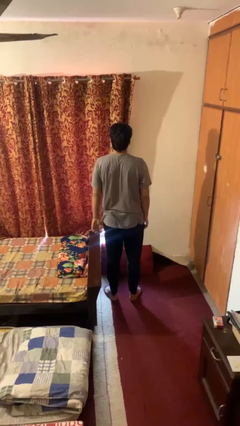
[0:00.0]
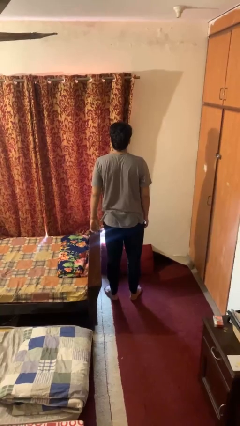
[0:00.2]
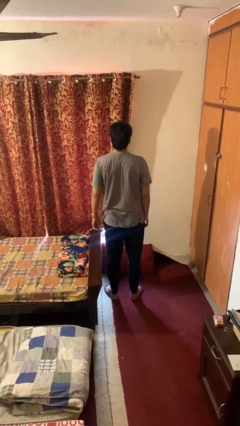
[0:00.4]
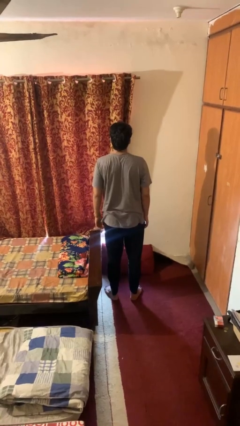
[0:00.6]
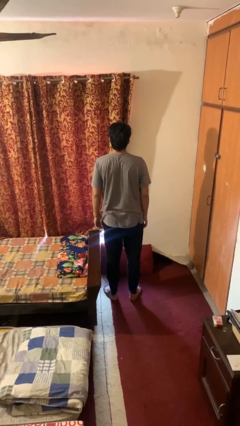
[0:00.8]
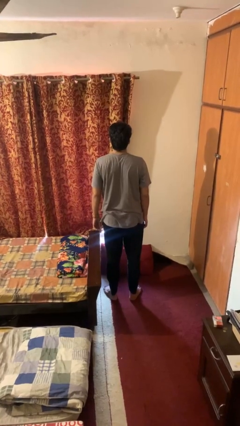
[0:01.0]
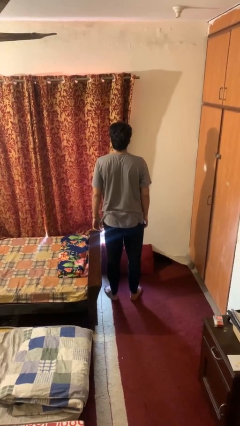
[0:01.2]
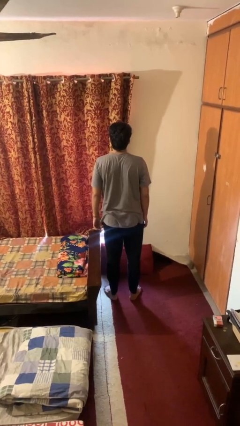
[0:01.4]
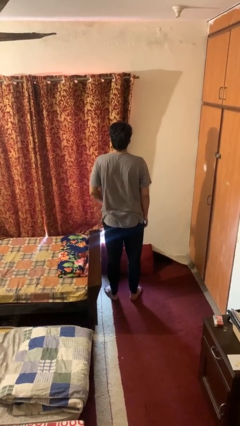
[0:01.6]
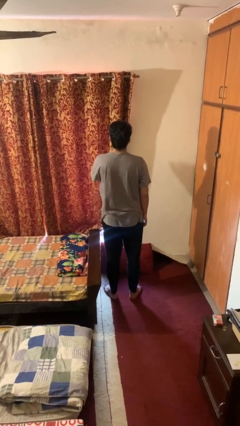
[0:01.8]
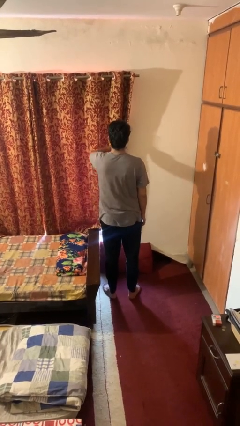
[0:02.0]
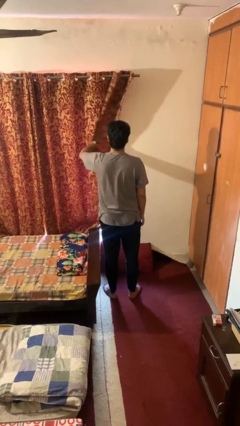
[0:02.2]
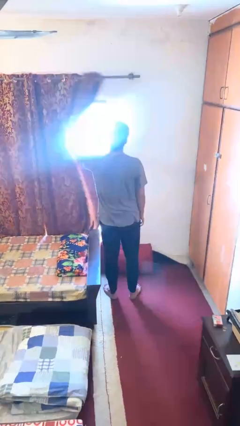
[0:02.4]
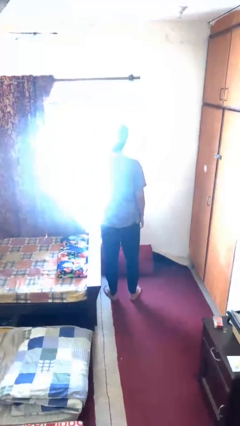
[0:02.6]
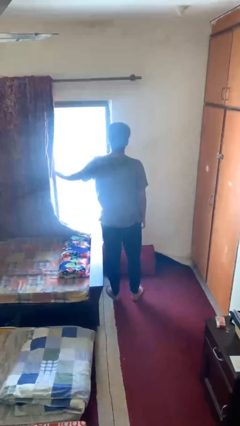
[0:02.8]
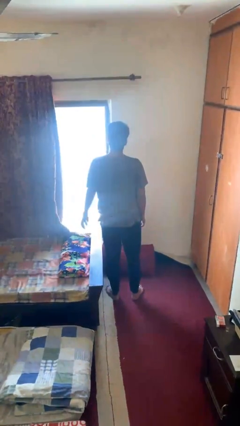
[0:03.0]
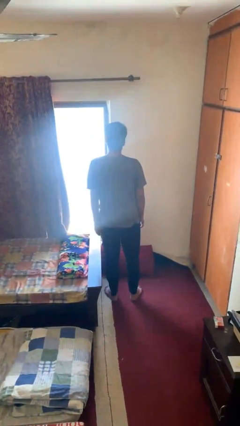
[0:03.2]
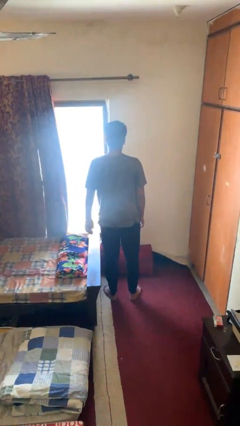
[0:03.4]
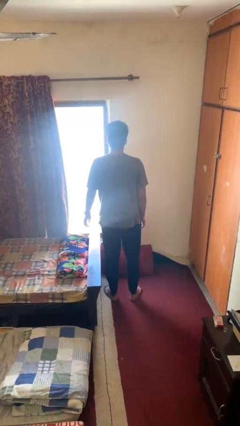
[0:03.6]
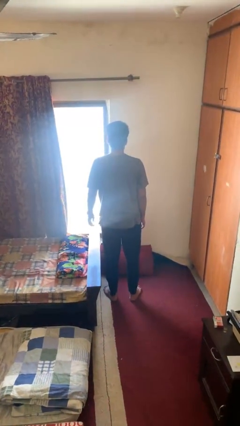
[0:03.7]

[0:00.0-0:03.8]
person opens curtains

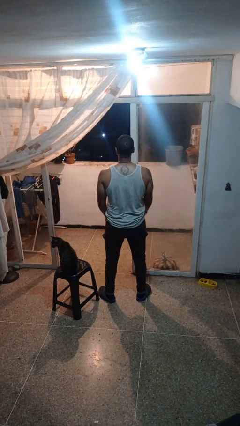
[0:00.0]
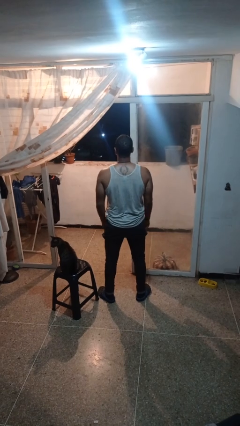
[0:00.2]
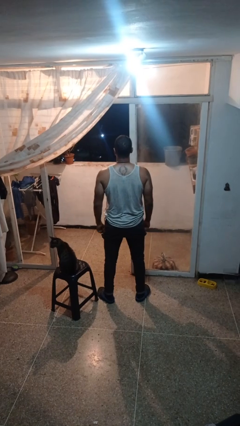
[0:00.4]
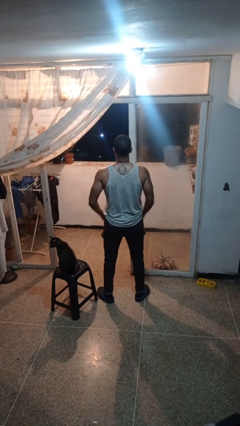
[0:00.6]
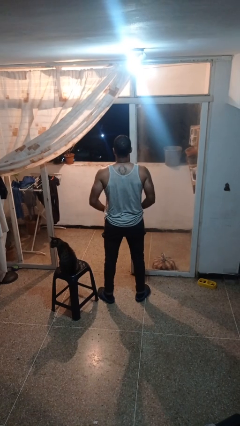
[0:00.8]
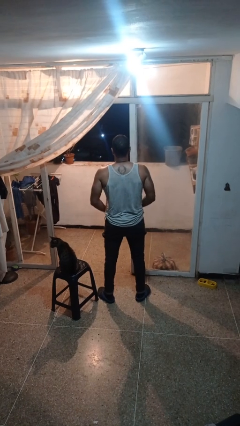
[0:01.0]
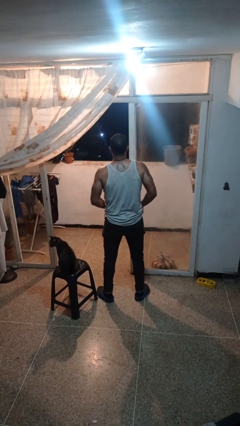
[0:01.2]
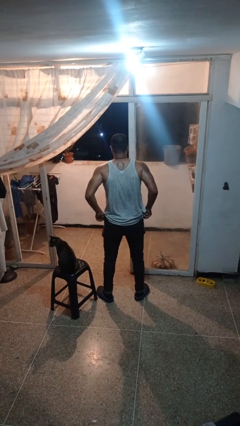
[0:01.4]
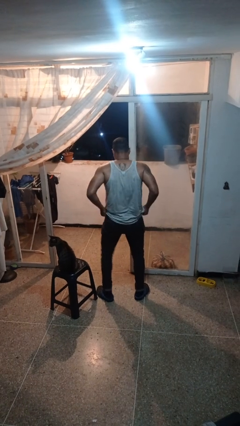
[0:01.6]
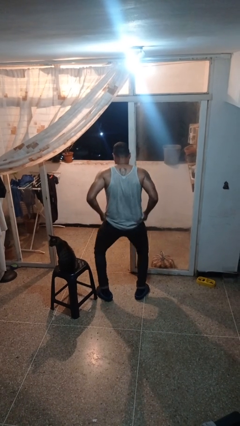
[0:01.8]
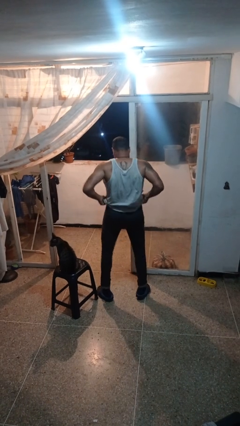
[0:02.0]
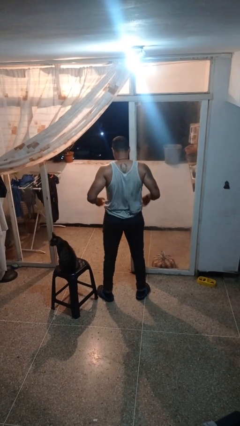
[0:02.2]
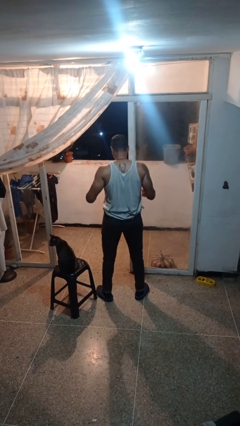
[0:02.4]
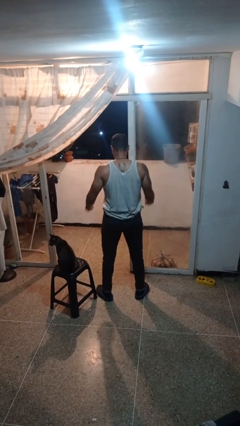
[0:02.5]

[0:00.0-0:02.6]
person hikes up pants

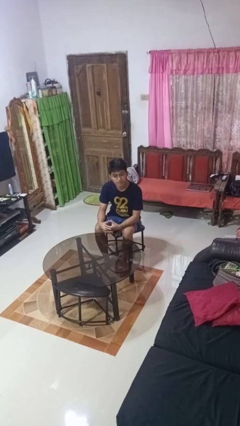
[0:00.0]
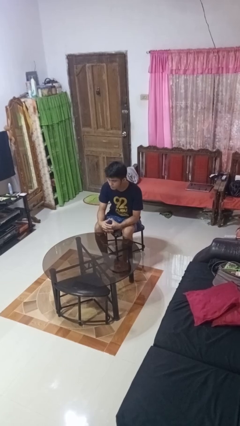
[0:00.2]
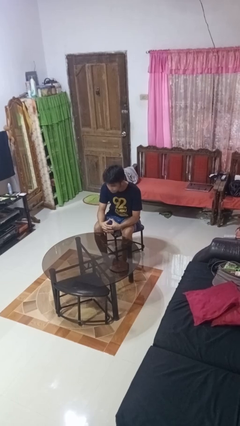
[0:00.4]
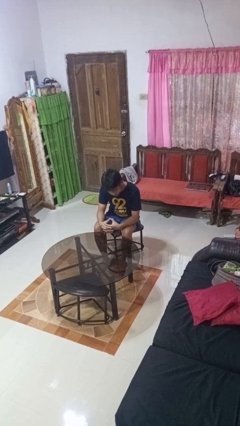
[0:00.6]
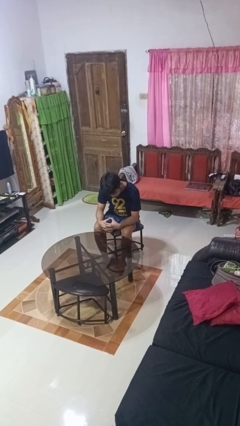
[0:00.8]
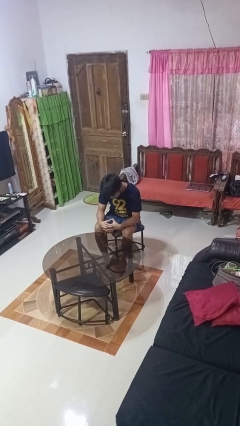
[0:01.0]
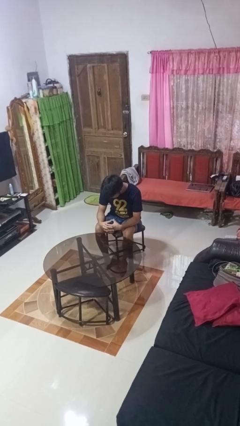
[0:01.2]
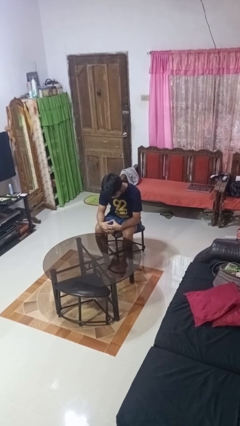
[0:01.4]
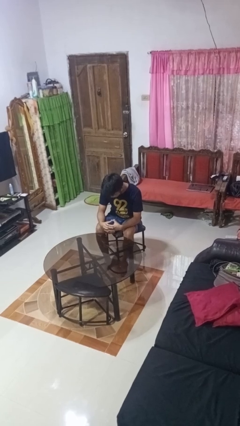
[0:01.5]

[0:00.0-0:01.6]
person shakes head

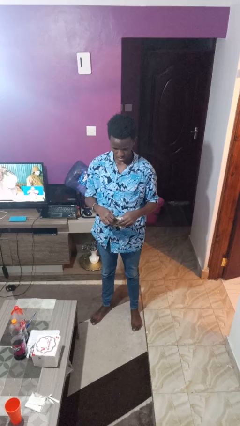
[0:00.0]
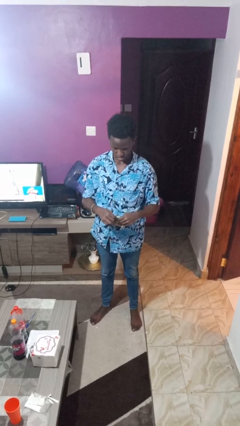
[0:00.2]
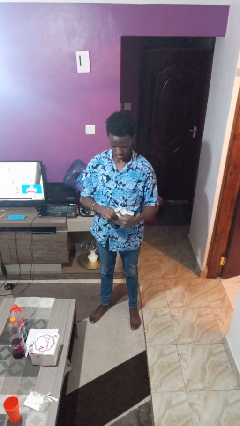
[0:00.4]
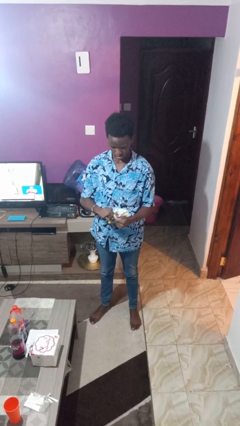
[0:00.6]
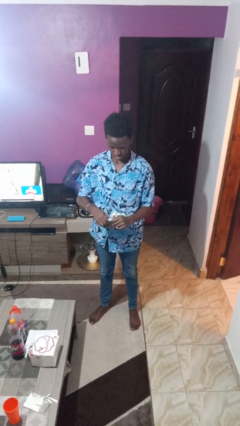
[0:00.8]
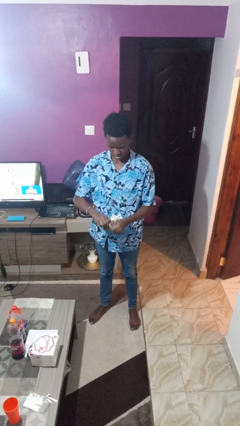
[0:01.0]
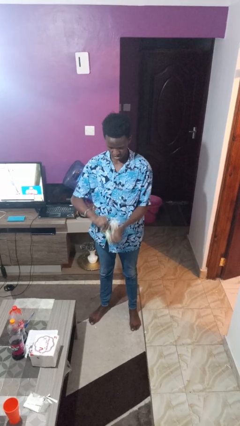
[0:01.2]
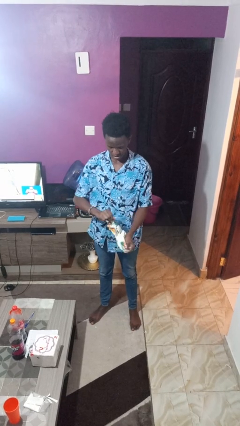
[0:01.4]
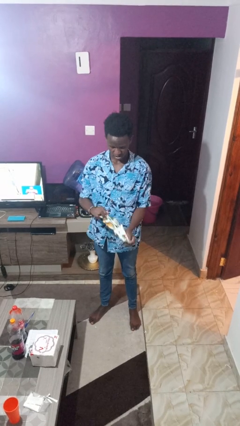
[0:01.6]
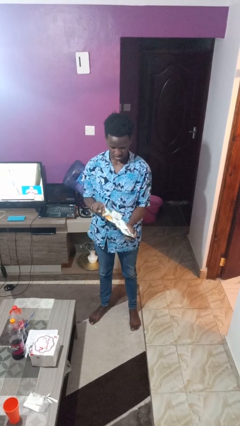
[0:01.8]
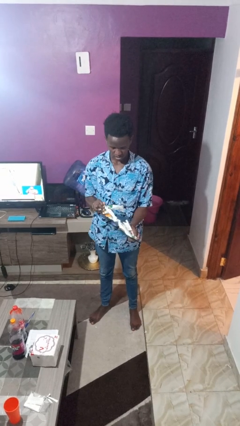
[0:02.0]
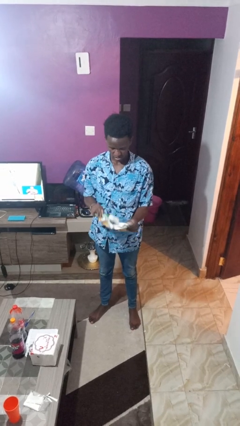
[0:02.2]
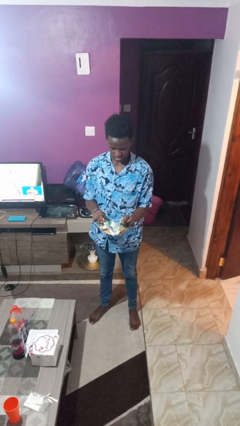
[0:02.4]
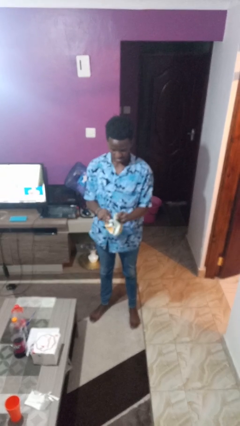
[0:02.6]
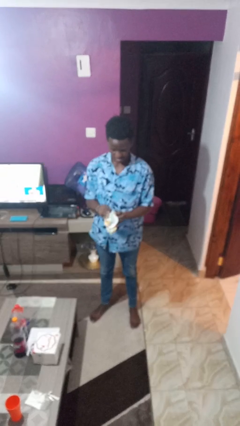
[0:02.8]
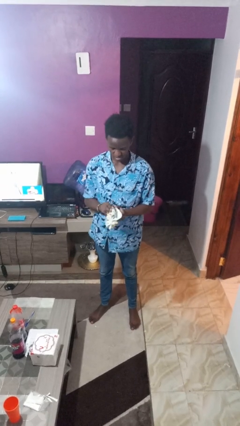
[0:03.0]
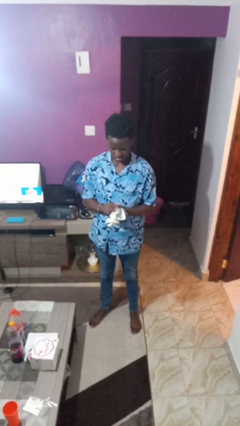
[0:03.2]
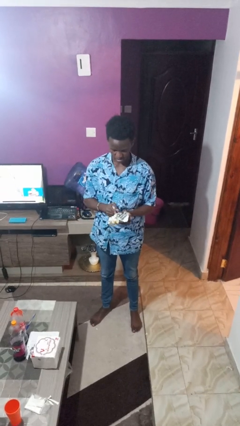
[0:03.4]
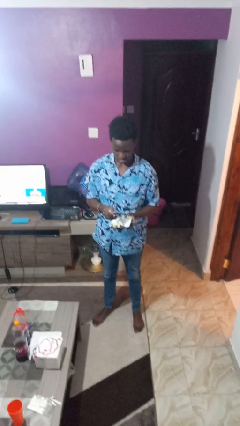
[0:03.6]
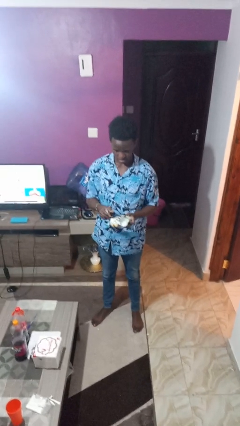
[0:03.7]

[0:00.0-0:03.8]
person tears paper

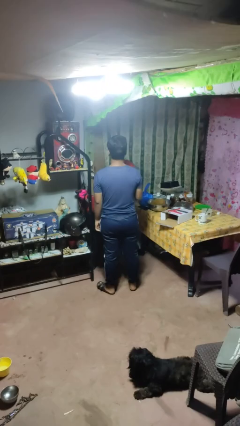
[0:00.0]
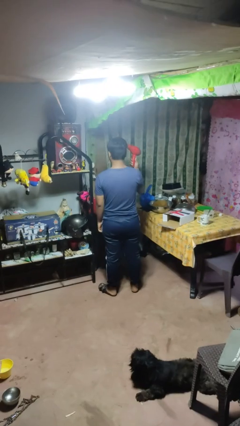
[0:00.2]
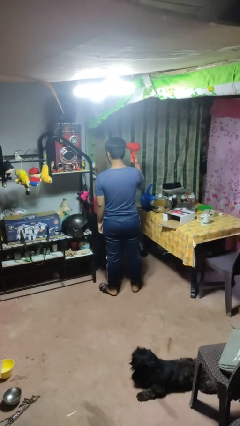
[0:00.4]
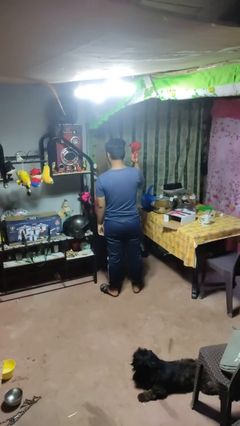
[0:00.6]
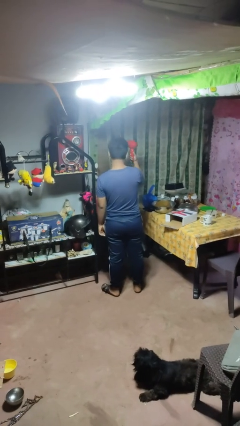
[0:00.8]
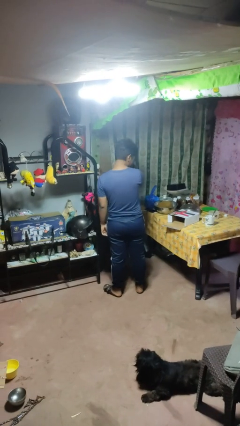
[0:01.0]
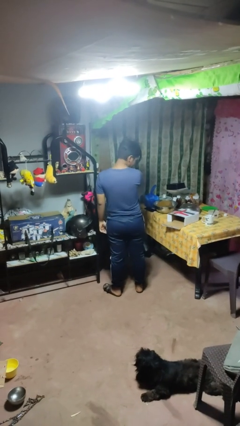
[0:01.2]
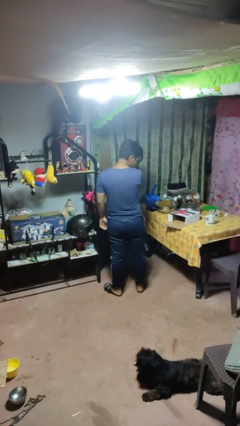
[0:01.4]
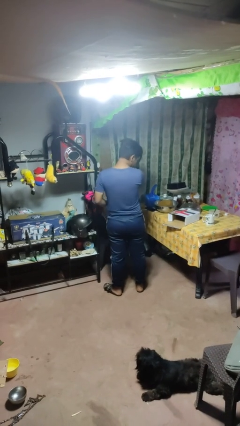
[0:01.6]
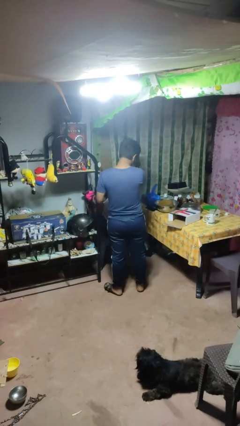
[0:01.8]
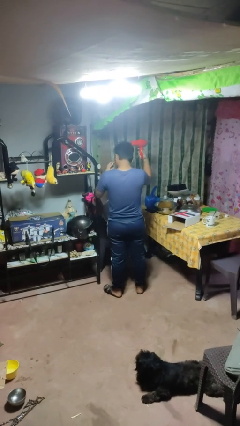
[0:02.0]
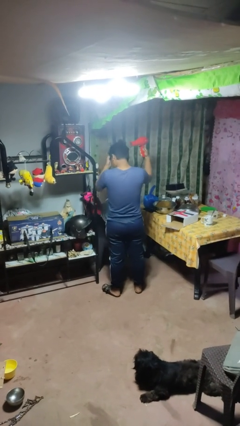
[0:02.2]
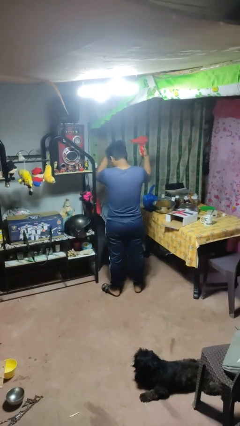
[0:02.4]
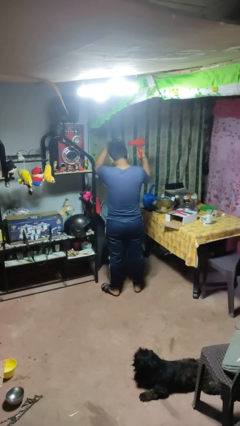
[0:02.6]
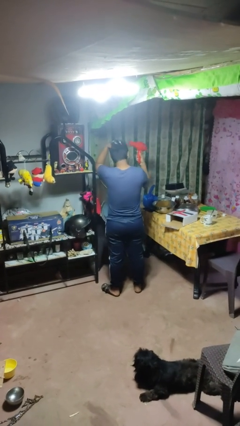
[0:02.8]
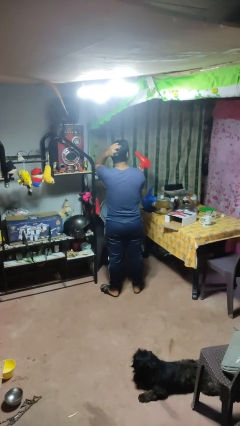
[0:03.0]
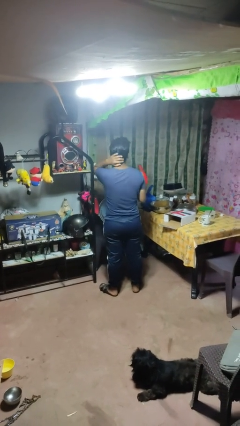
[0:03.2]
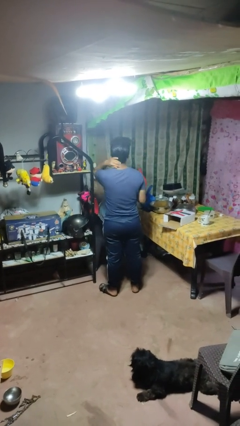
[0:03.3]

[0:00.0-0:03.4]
person dries hair with hairdryer

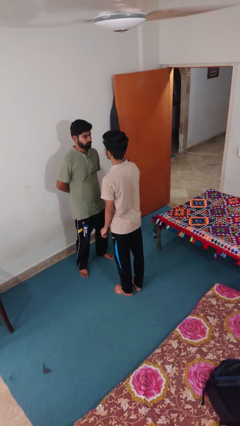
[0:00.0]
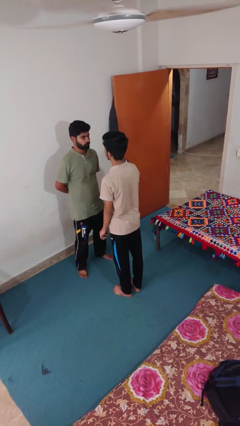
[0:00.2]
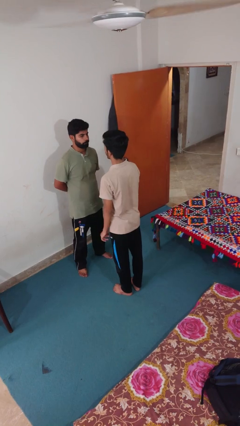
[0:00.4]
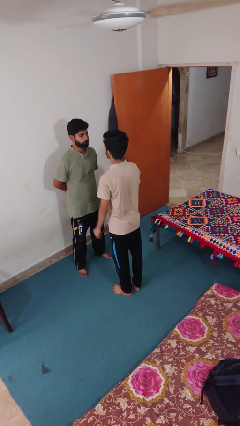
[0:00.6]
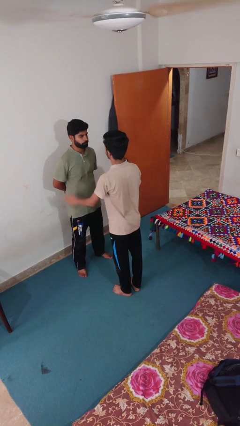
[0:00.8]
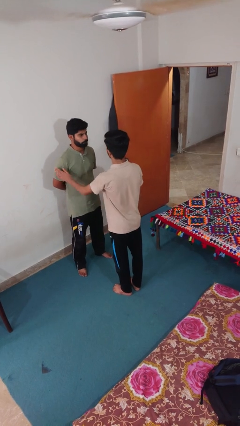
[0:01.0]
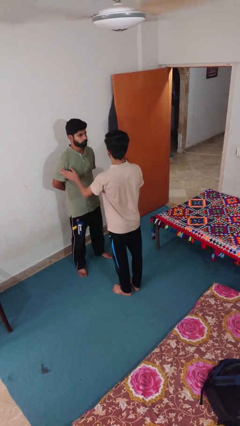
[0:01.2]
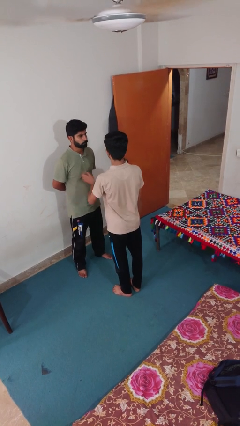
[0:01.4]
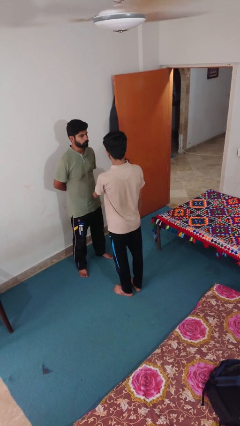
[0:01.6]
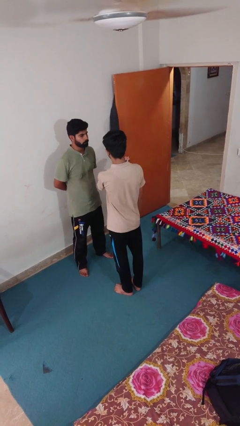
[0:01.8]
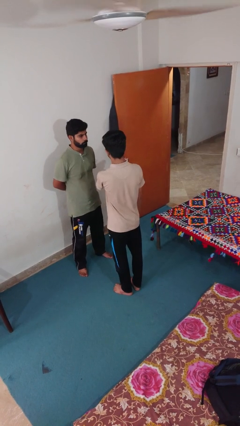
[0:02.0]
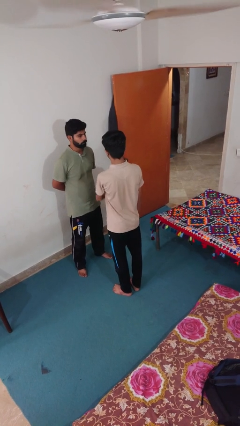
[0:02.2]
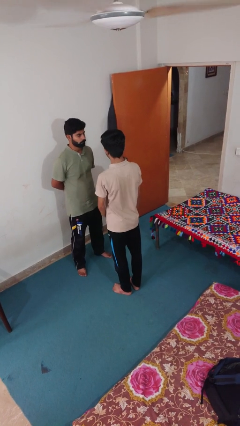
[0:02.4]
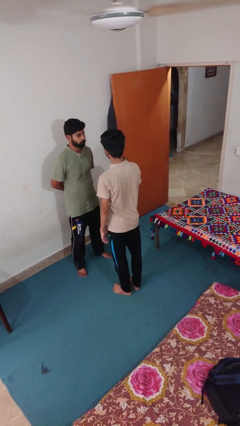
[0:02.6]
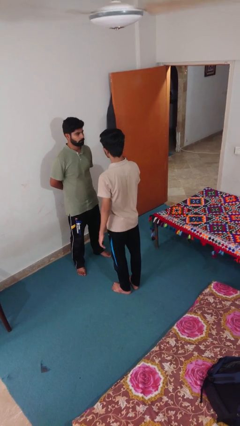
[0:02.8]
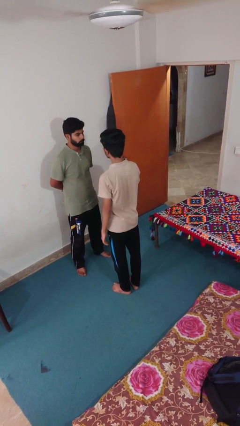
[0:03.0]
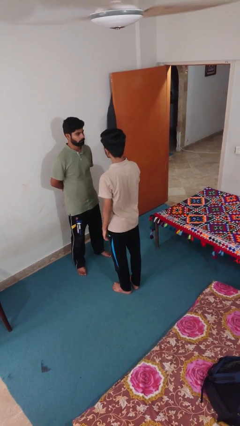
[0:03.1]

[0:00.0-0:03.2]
person shoves person
